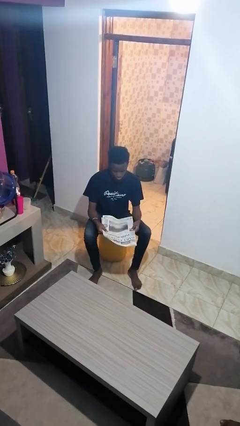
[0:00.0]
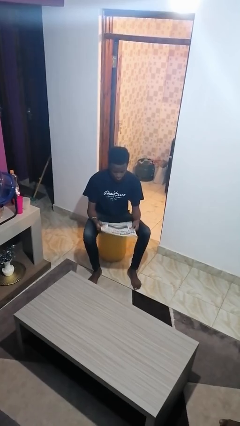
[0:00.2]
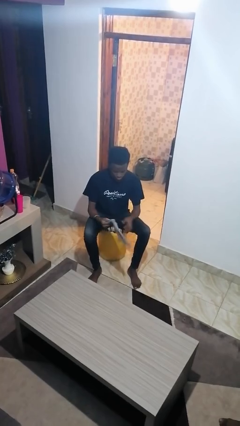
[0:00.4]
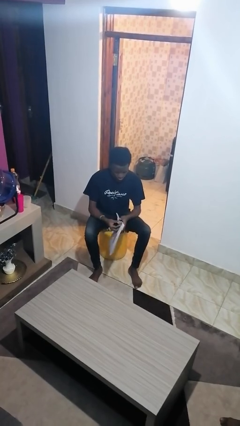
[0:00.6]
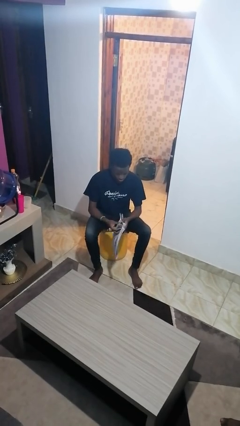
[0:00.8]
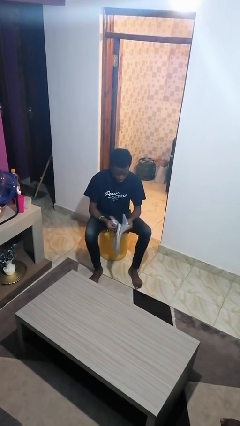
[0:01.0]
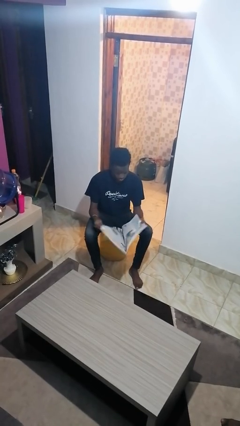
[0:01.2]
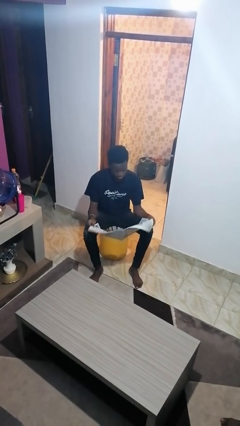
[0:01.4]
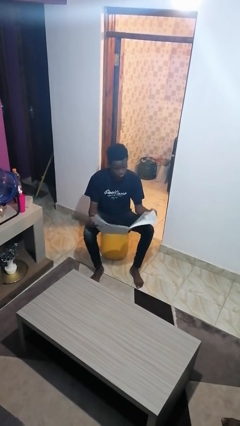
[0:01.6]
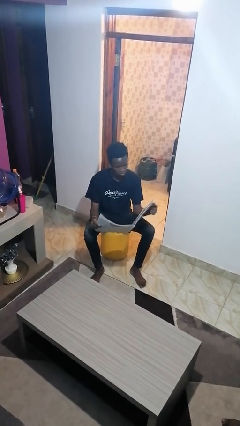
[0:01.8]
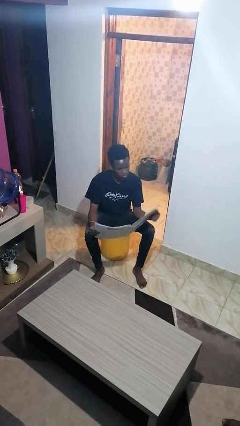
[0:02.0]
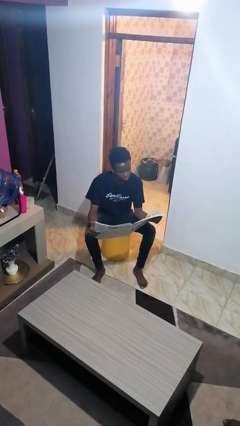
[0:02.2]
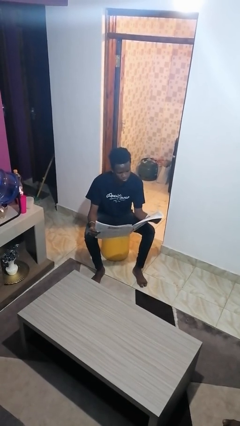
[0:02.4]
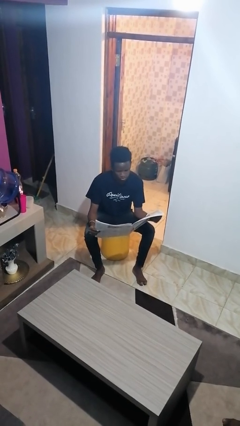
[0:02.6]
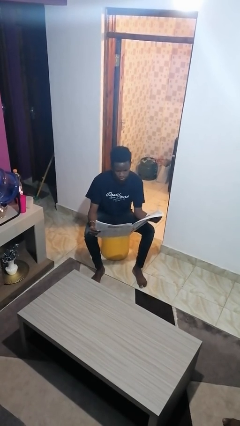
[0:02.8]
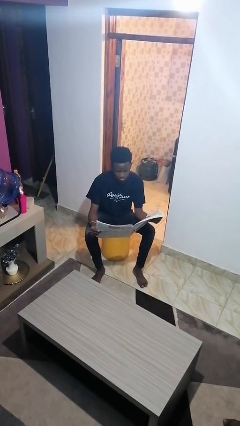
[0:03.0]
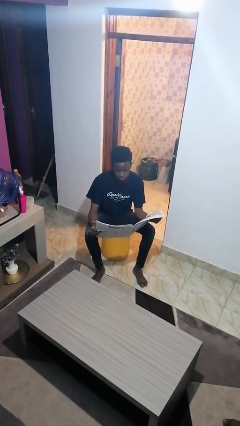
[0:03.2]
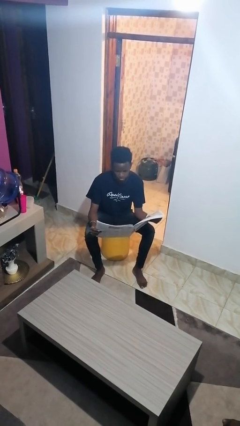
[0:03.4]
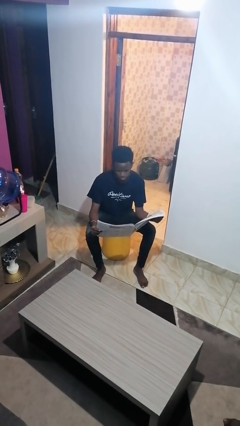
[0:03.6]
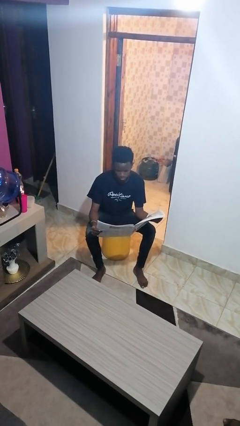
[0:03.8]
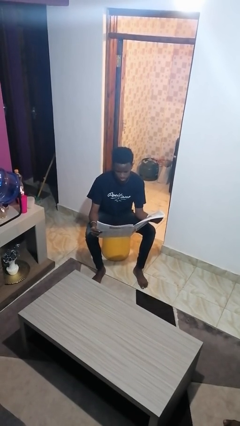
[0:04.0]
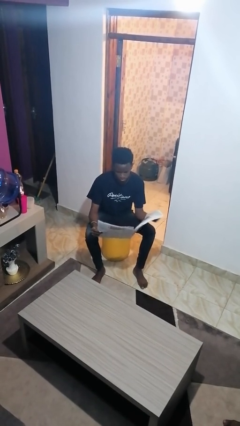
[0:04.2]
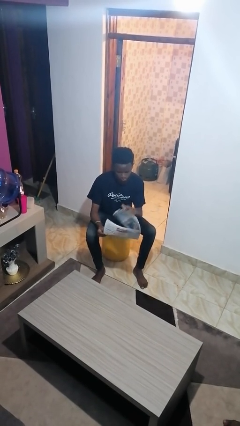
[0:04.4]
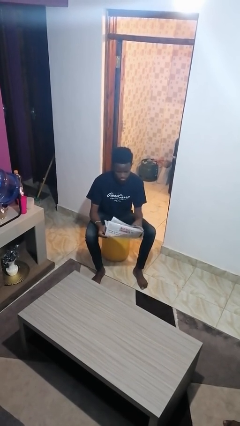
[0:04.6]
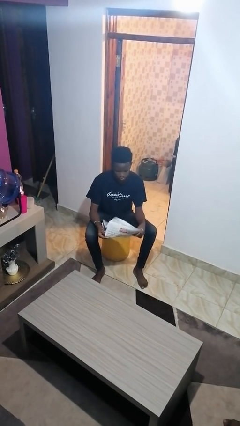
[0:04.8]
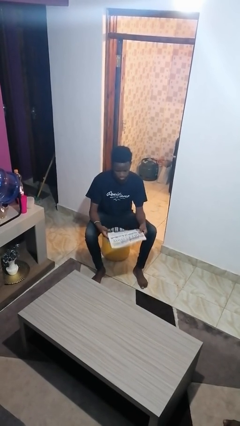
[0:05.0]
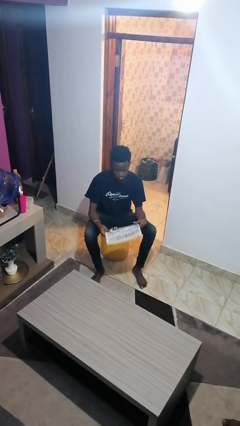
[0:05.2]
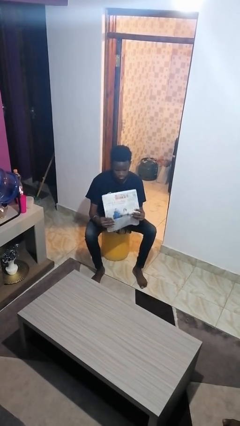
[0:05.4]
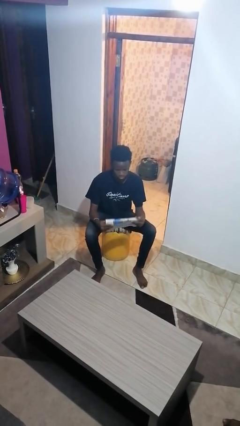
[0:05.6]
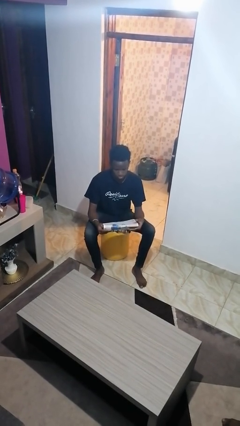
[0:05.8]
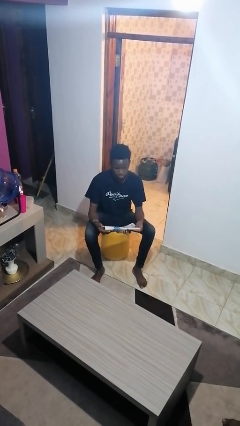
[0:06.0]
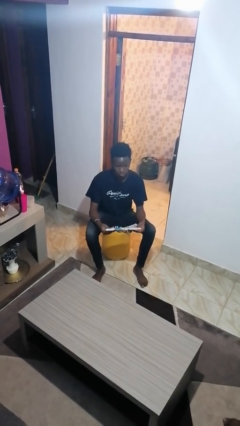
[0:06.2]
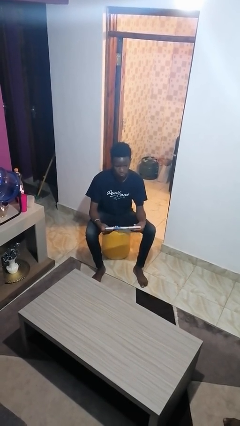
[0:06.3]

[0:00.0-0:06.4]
person reads newspaper

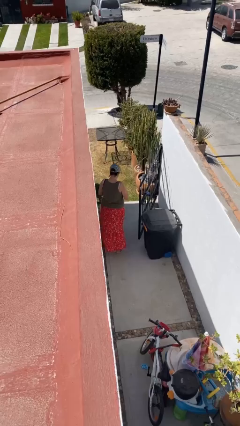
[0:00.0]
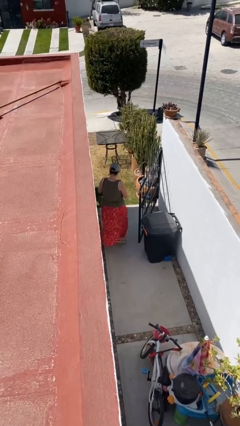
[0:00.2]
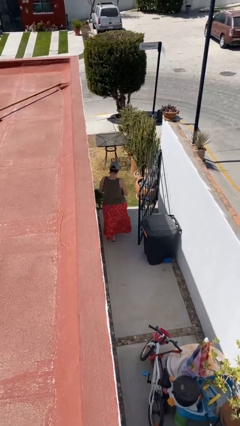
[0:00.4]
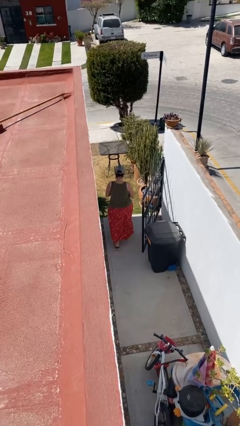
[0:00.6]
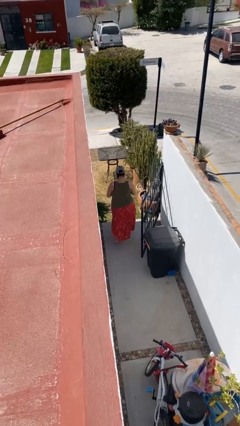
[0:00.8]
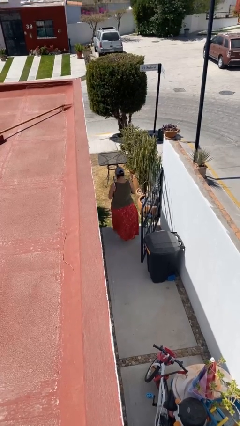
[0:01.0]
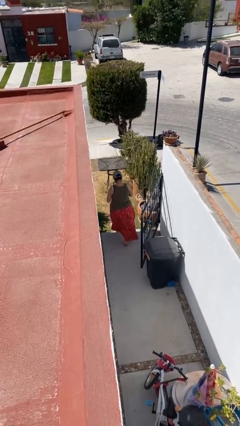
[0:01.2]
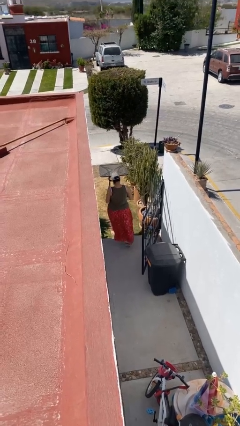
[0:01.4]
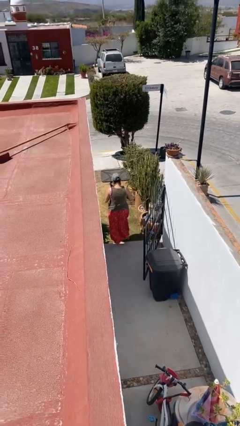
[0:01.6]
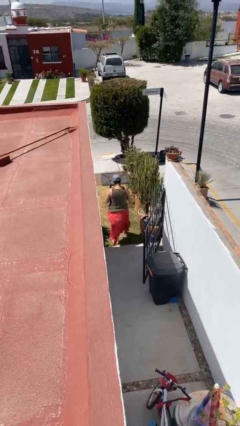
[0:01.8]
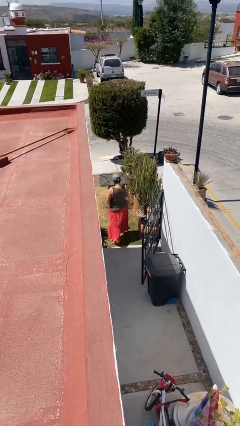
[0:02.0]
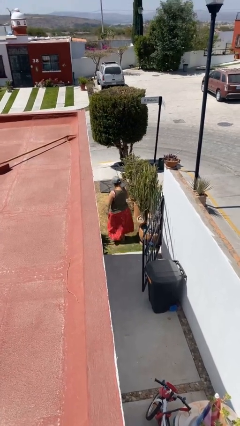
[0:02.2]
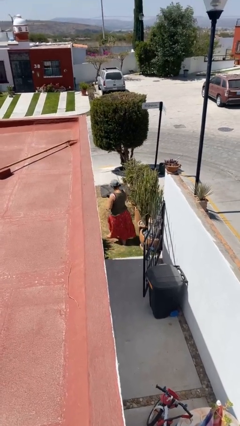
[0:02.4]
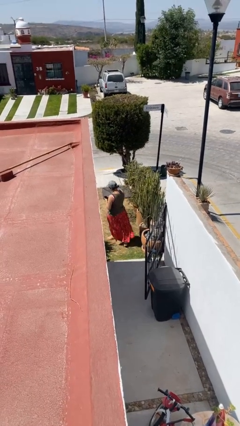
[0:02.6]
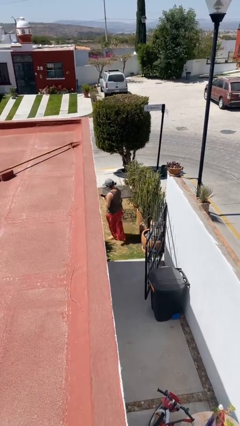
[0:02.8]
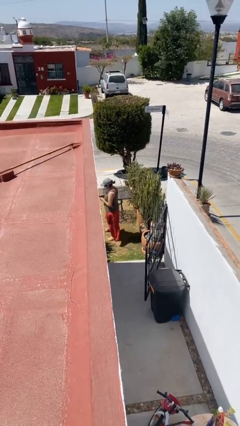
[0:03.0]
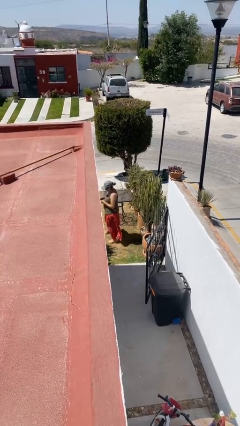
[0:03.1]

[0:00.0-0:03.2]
person exits scene through structure

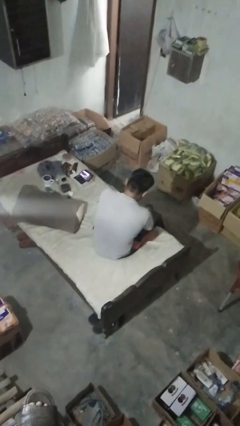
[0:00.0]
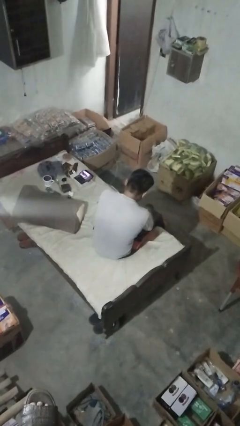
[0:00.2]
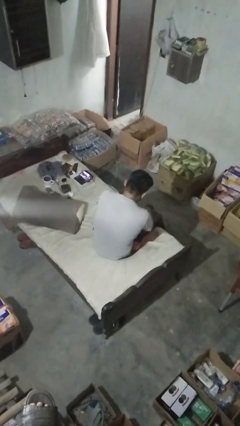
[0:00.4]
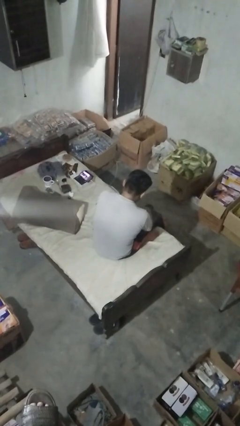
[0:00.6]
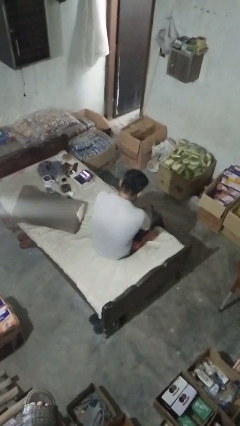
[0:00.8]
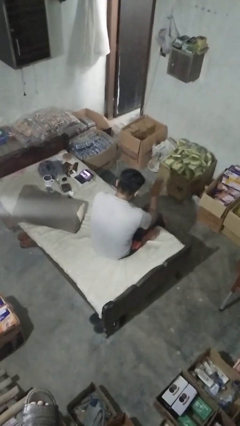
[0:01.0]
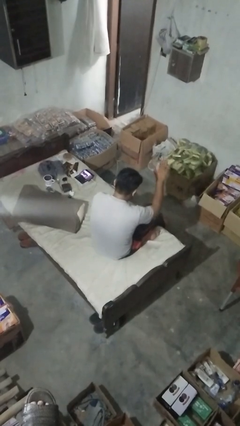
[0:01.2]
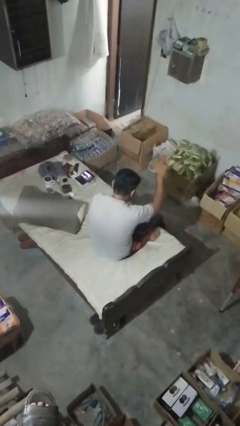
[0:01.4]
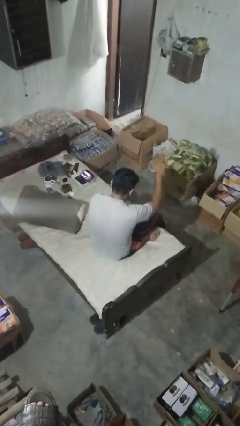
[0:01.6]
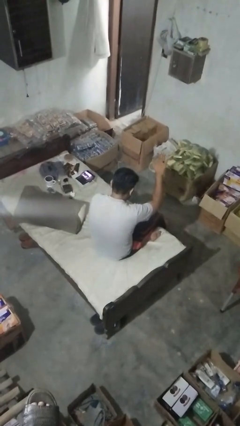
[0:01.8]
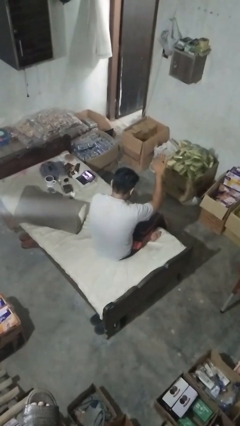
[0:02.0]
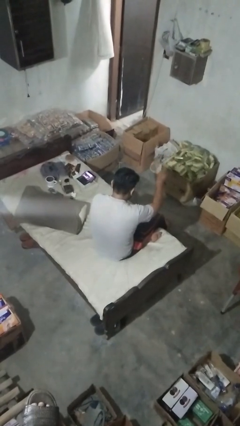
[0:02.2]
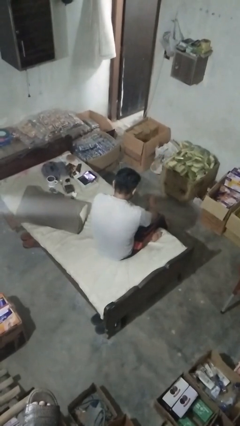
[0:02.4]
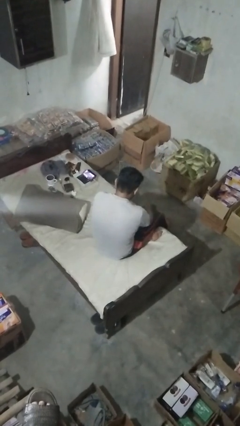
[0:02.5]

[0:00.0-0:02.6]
person gestures stop

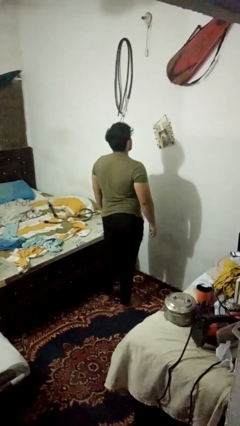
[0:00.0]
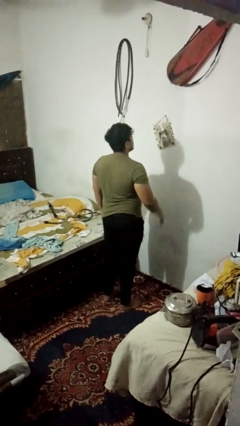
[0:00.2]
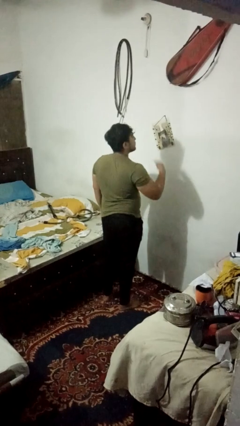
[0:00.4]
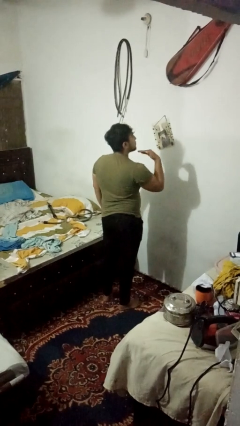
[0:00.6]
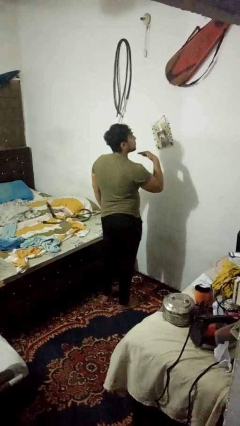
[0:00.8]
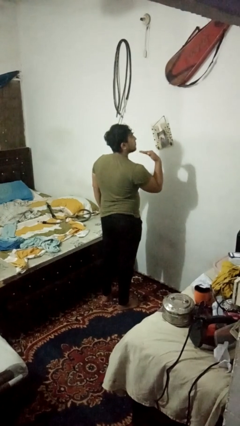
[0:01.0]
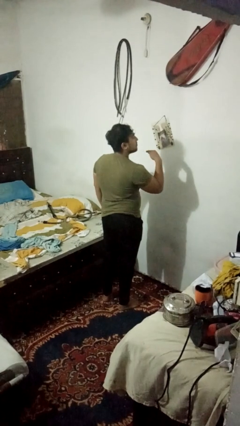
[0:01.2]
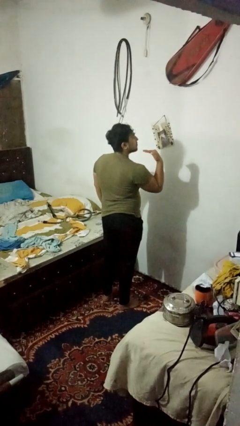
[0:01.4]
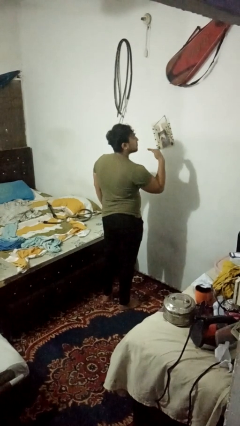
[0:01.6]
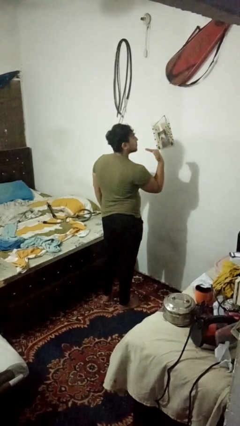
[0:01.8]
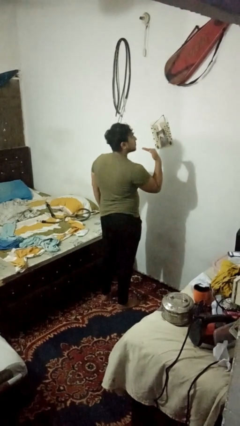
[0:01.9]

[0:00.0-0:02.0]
person gestures cut

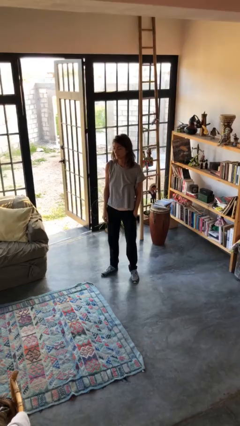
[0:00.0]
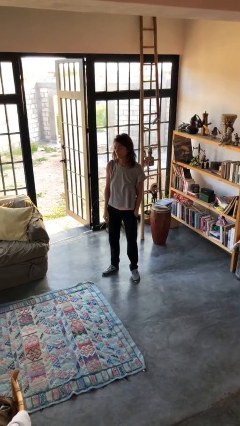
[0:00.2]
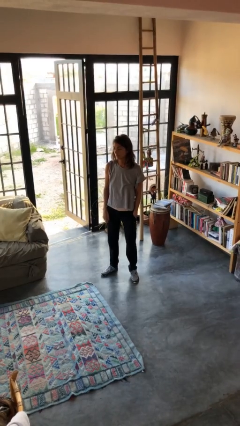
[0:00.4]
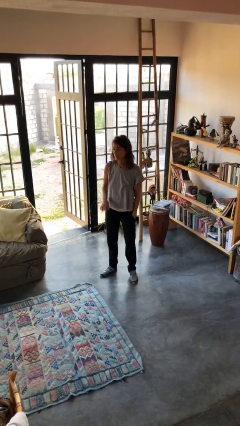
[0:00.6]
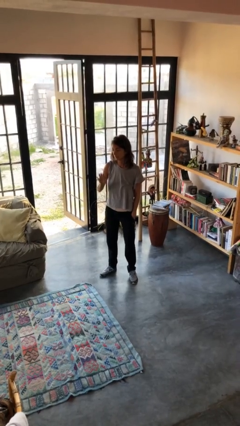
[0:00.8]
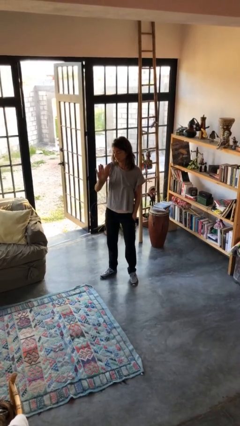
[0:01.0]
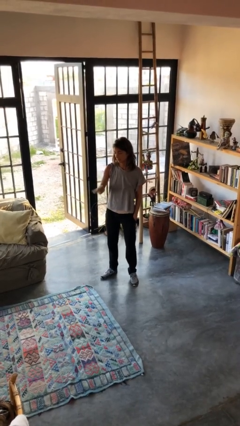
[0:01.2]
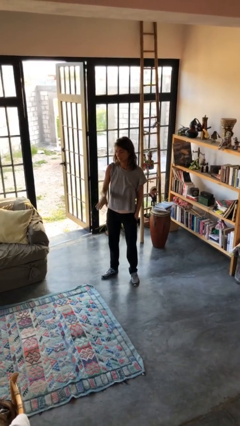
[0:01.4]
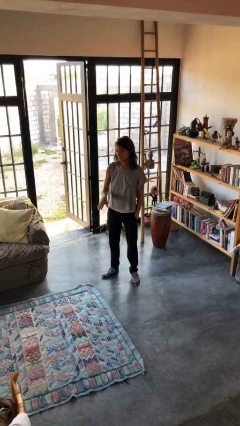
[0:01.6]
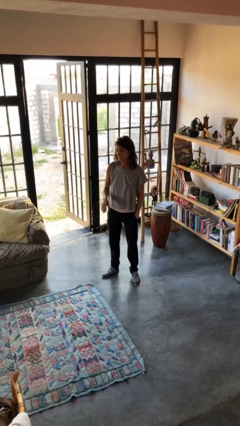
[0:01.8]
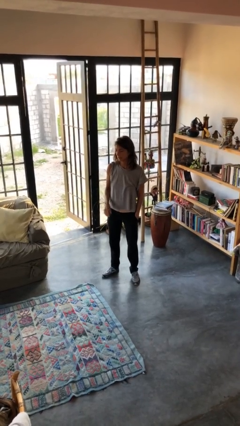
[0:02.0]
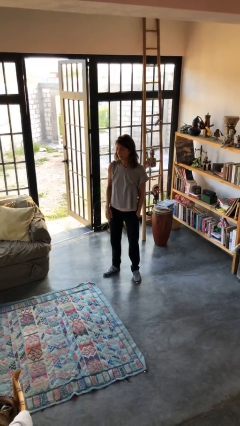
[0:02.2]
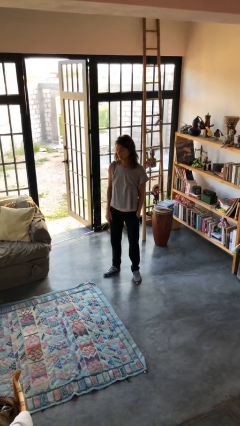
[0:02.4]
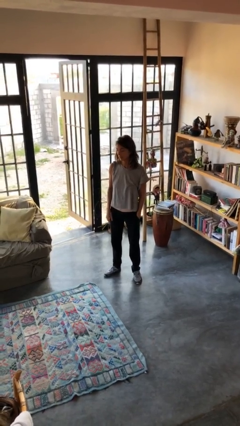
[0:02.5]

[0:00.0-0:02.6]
person gestures swipe down

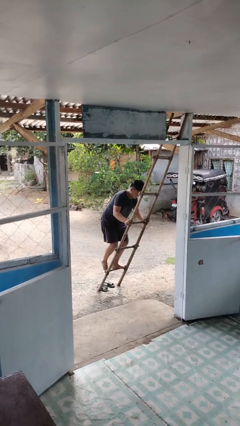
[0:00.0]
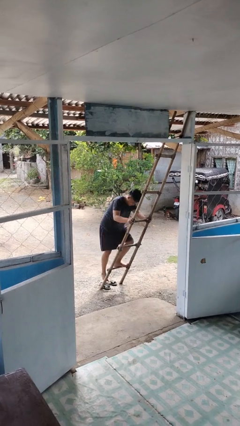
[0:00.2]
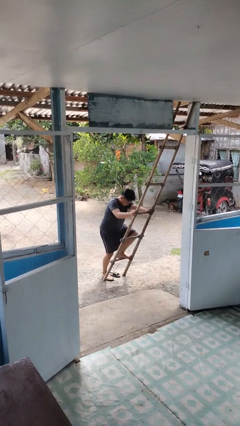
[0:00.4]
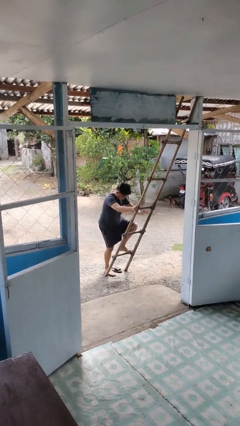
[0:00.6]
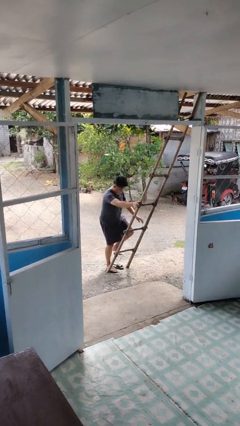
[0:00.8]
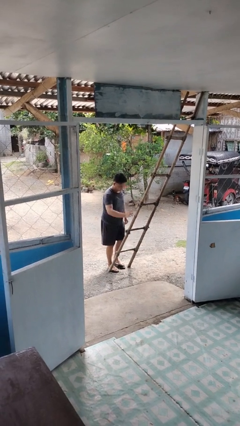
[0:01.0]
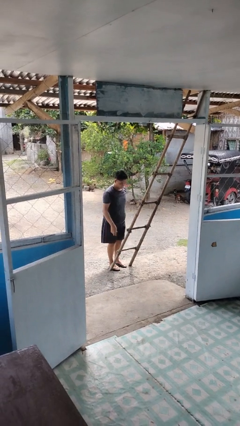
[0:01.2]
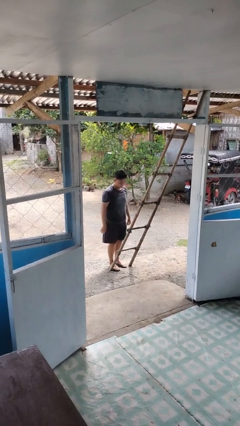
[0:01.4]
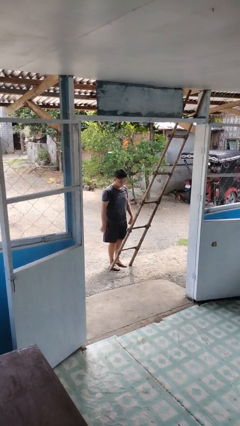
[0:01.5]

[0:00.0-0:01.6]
person climbs down ladder
